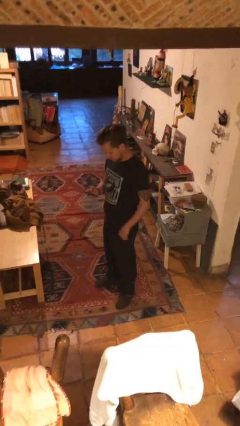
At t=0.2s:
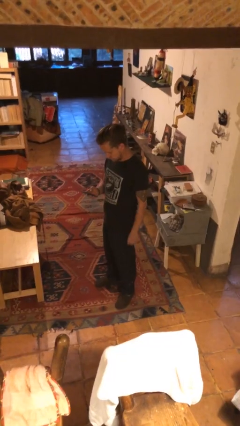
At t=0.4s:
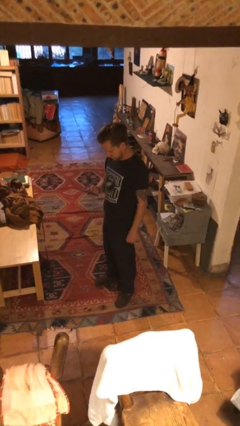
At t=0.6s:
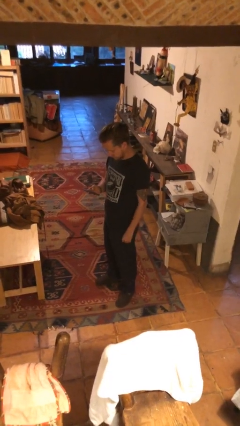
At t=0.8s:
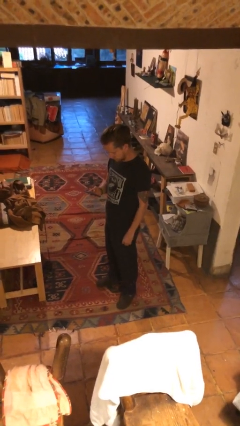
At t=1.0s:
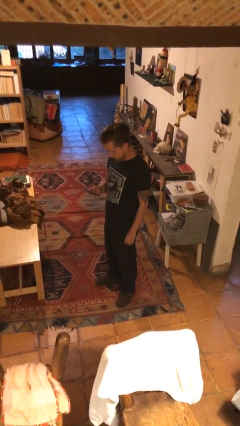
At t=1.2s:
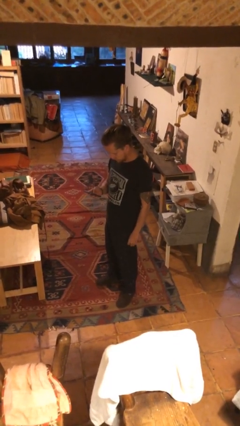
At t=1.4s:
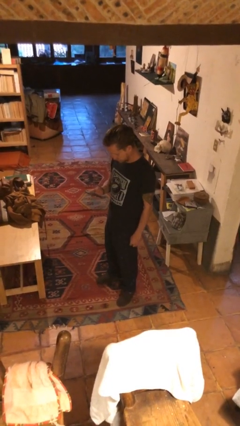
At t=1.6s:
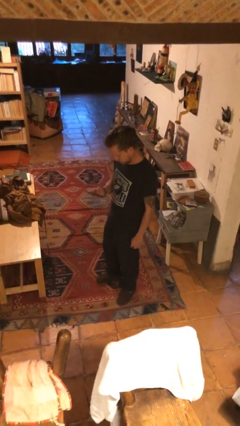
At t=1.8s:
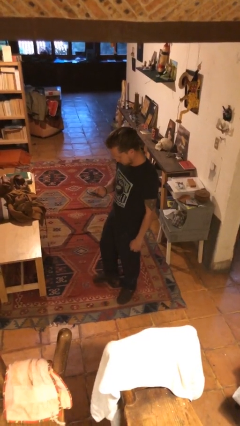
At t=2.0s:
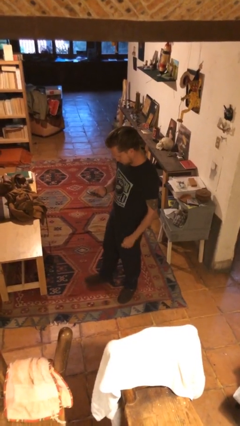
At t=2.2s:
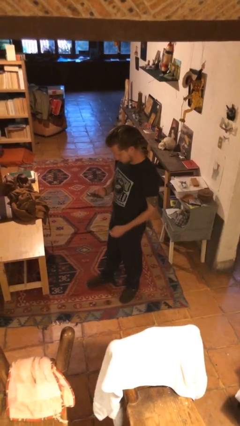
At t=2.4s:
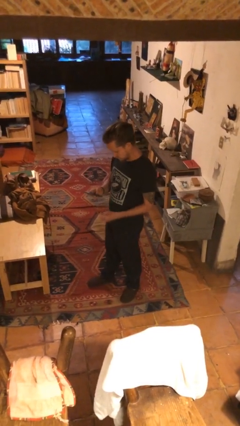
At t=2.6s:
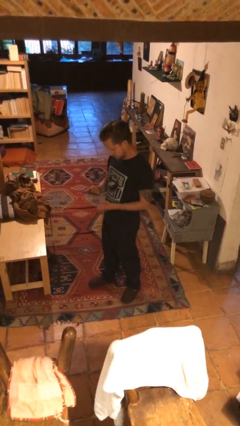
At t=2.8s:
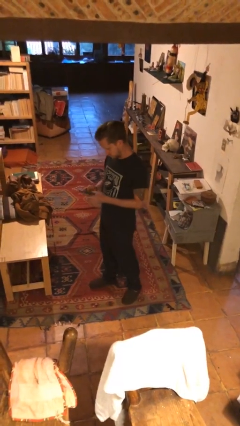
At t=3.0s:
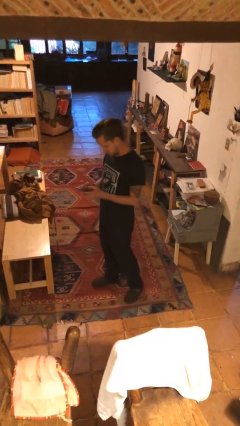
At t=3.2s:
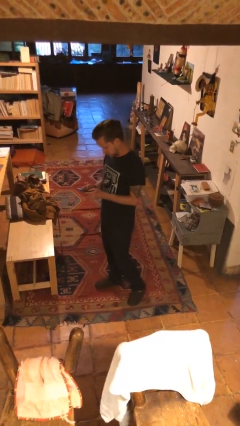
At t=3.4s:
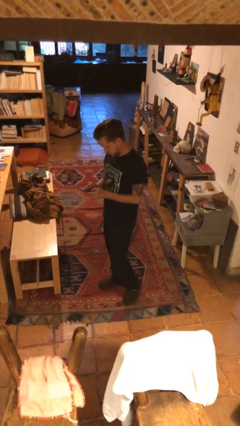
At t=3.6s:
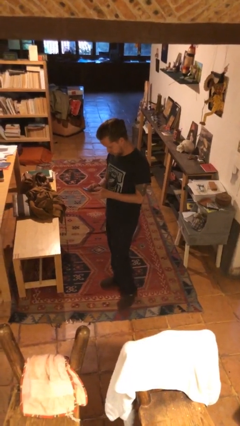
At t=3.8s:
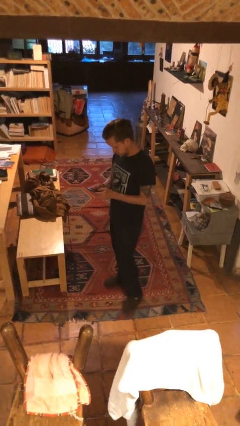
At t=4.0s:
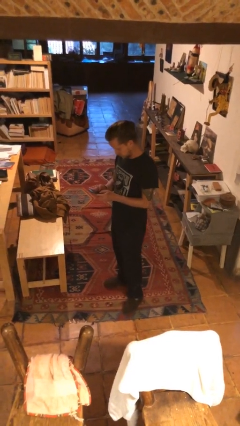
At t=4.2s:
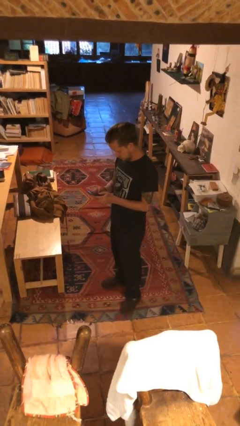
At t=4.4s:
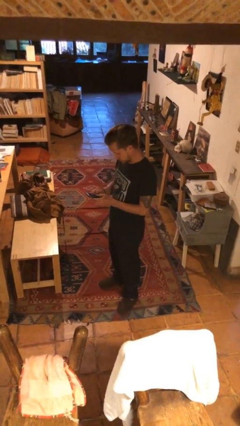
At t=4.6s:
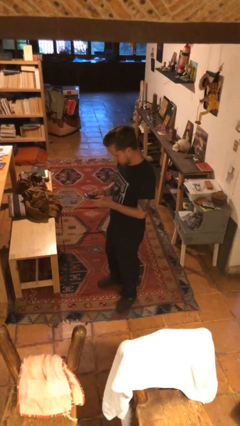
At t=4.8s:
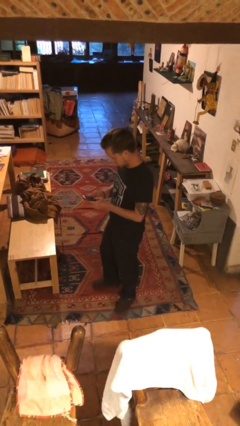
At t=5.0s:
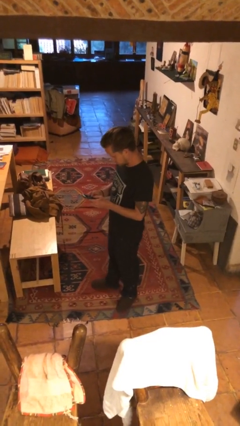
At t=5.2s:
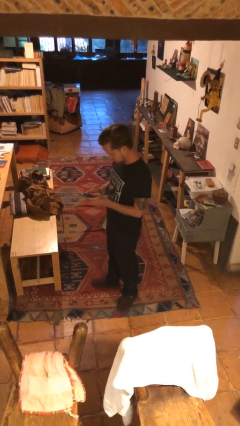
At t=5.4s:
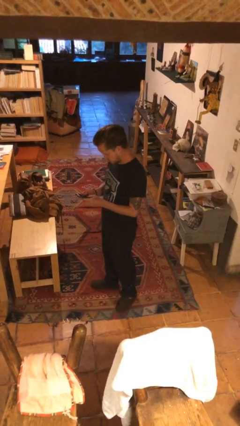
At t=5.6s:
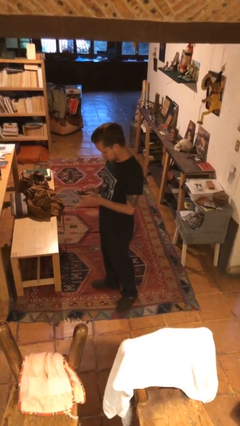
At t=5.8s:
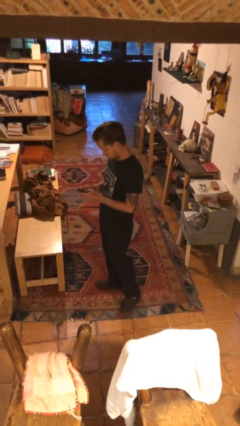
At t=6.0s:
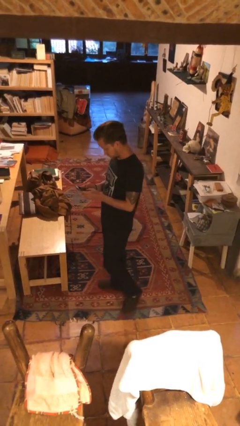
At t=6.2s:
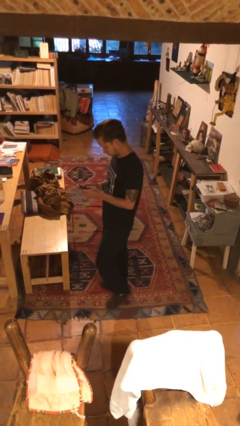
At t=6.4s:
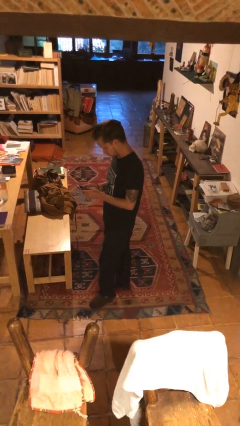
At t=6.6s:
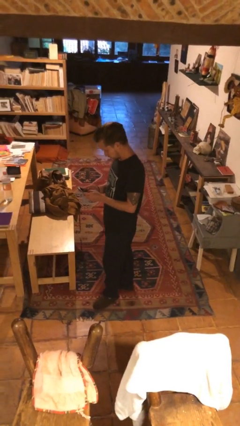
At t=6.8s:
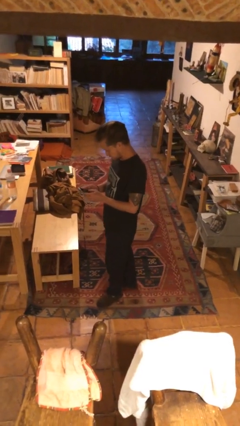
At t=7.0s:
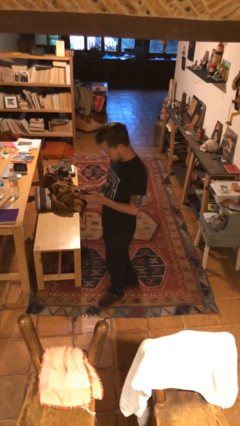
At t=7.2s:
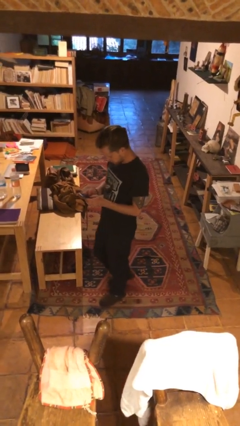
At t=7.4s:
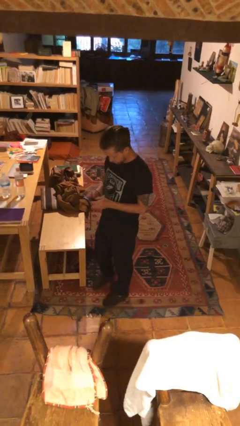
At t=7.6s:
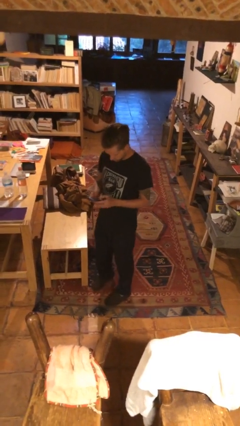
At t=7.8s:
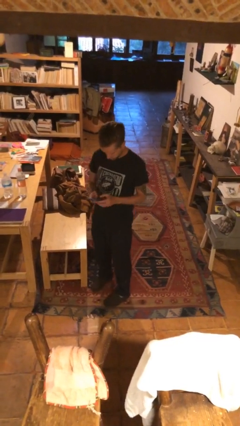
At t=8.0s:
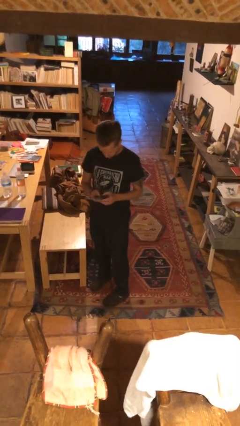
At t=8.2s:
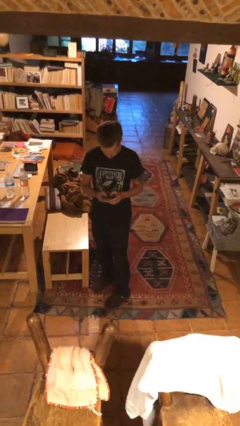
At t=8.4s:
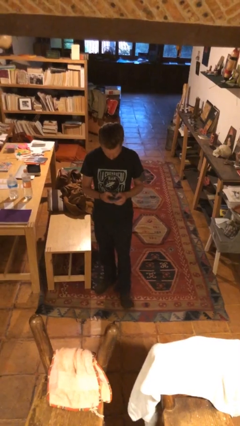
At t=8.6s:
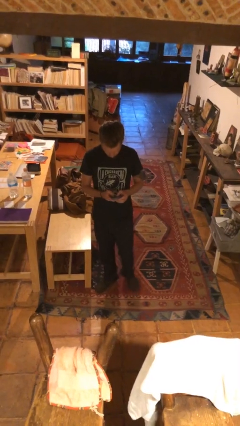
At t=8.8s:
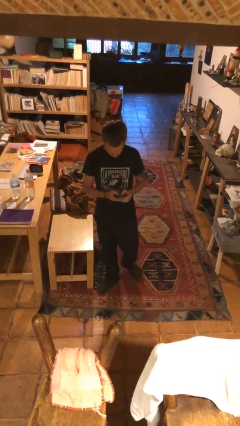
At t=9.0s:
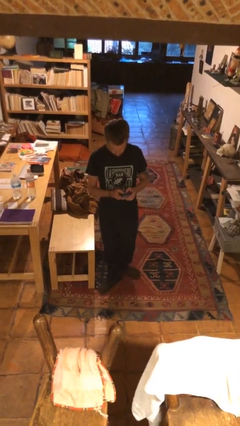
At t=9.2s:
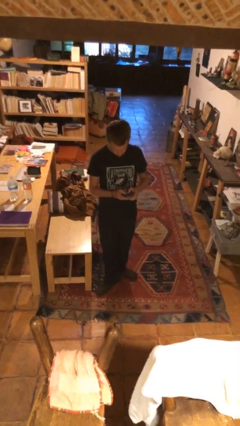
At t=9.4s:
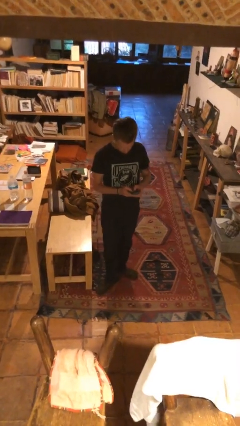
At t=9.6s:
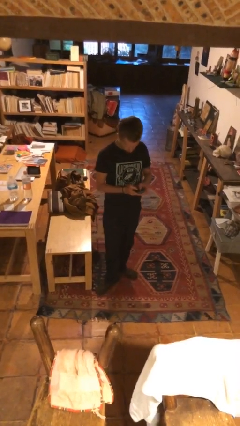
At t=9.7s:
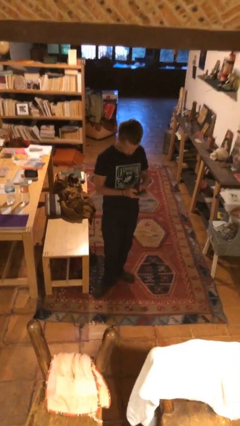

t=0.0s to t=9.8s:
person texts on phone

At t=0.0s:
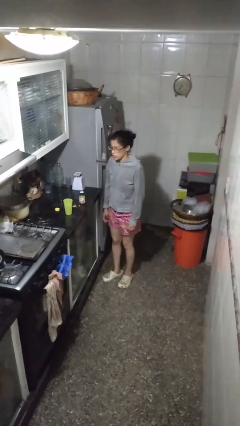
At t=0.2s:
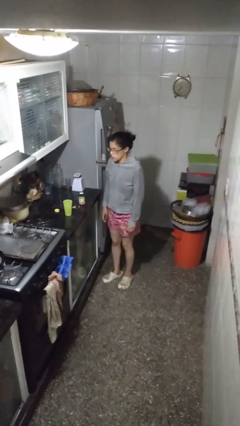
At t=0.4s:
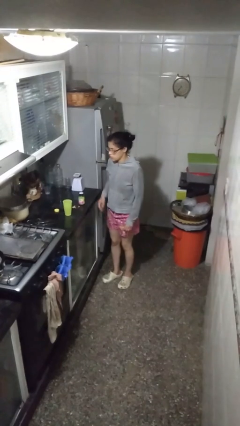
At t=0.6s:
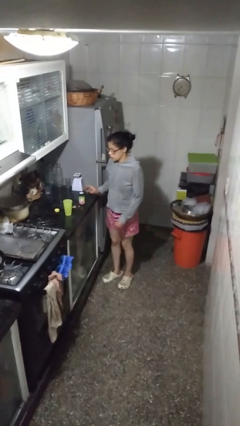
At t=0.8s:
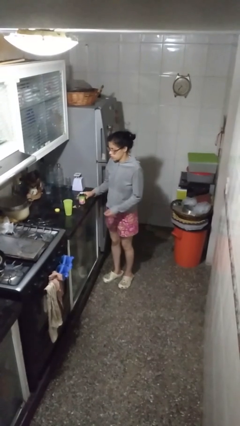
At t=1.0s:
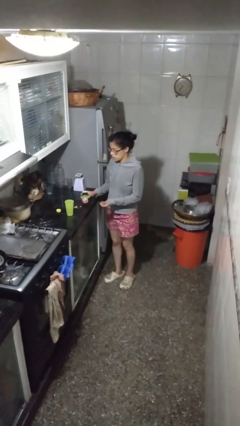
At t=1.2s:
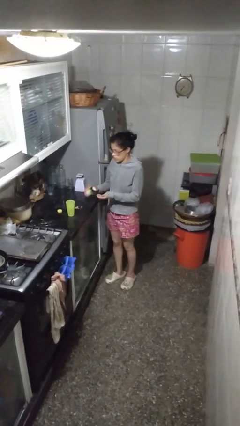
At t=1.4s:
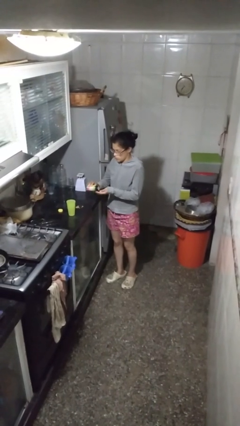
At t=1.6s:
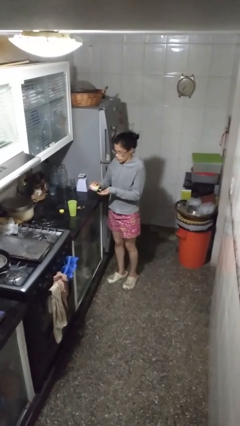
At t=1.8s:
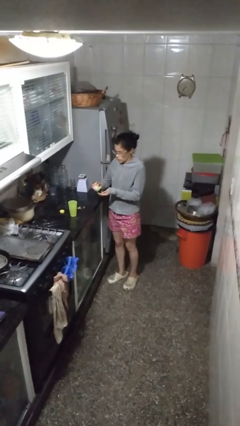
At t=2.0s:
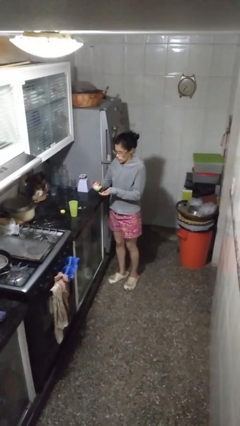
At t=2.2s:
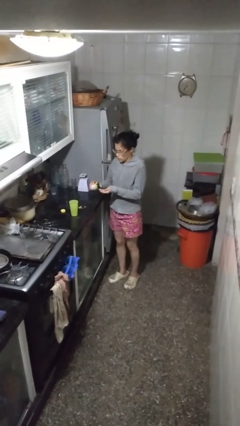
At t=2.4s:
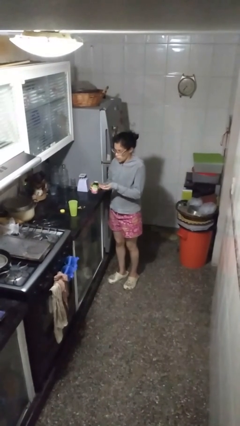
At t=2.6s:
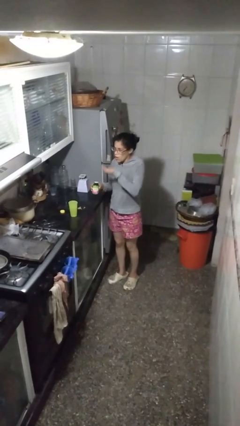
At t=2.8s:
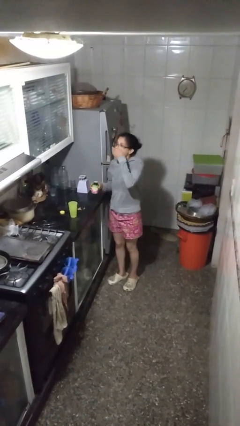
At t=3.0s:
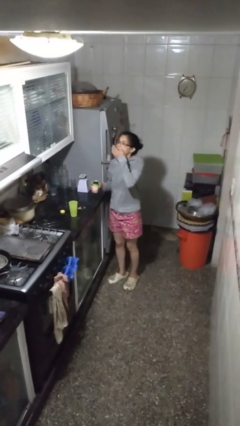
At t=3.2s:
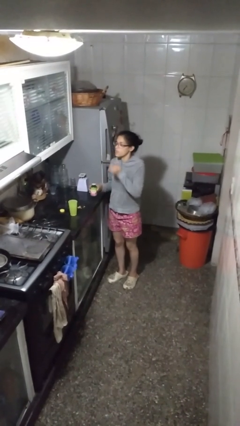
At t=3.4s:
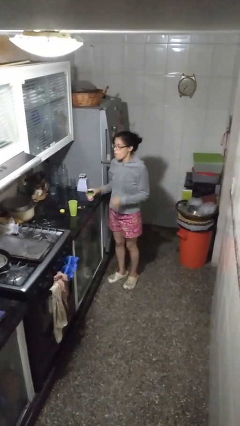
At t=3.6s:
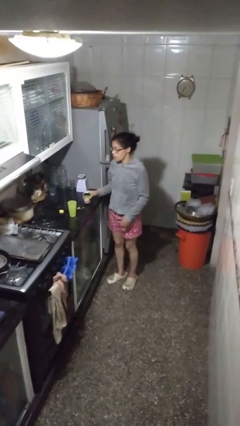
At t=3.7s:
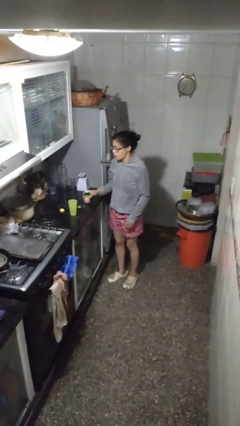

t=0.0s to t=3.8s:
person takes medicine pills

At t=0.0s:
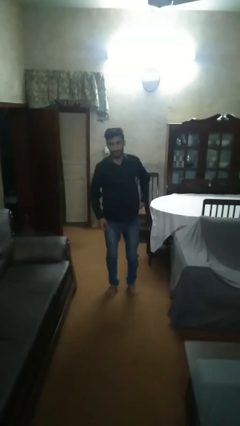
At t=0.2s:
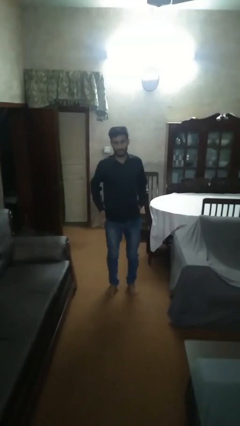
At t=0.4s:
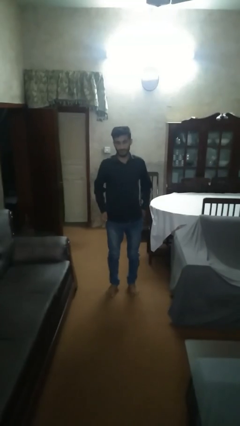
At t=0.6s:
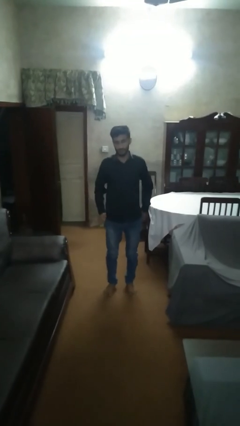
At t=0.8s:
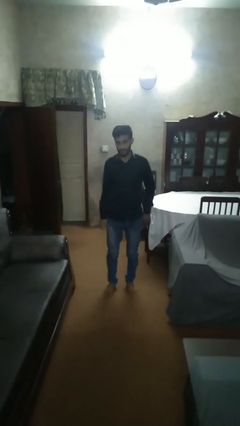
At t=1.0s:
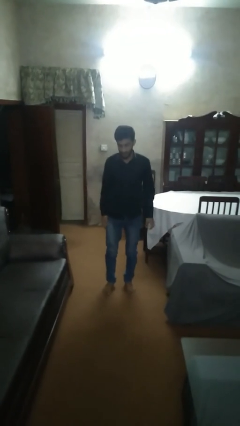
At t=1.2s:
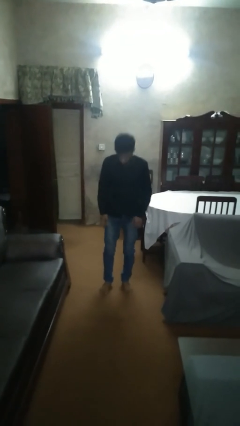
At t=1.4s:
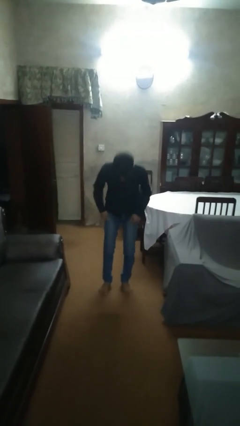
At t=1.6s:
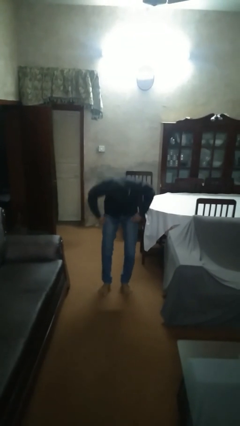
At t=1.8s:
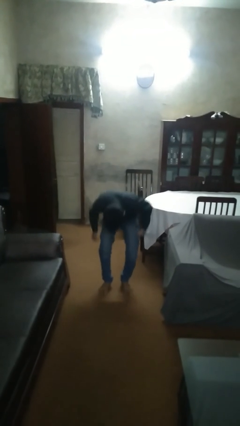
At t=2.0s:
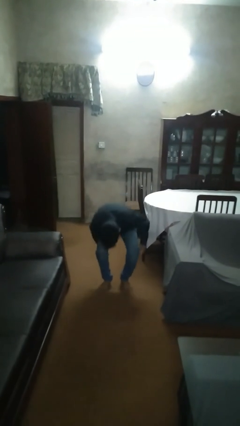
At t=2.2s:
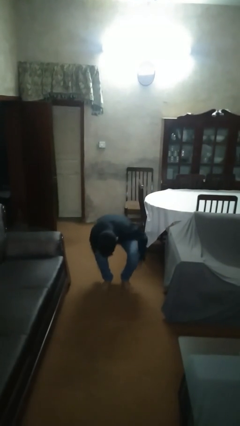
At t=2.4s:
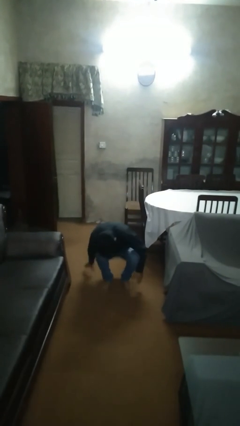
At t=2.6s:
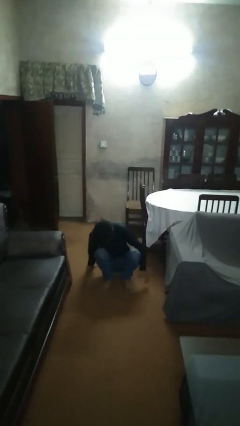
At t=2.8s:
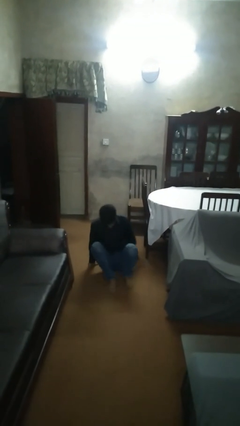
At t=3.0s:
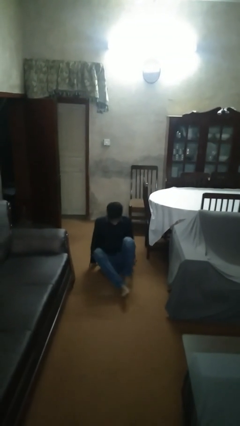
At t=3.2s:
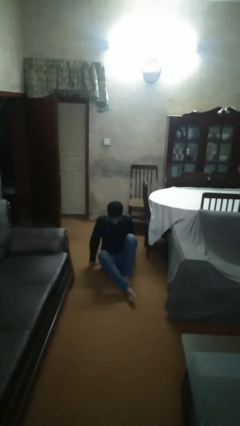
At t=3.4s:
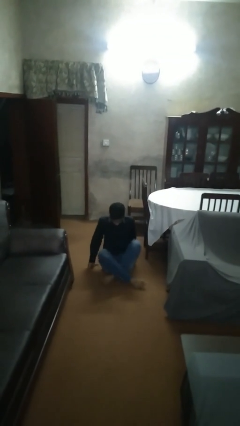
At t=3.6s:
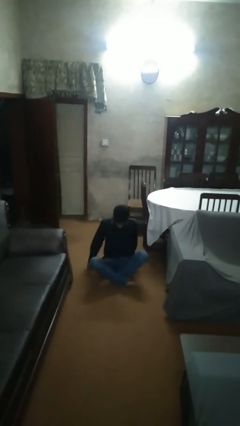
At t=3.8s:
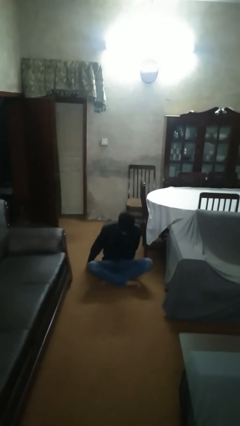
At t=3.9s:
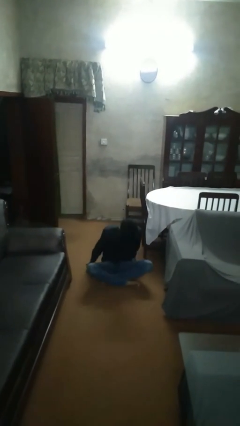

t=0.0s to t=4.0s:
person sits crisscross

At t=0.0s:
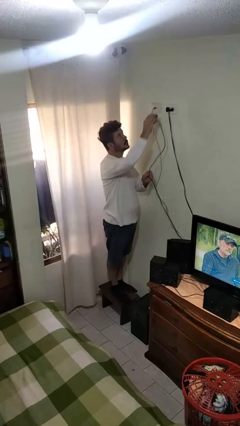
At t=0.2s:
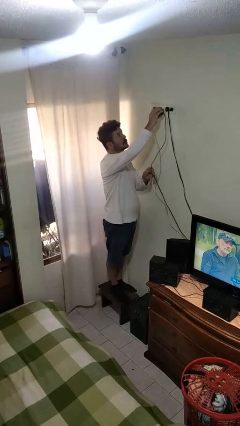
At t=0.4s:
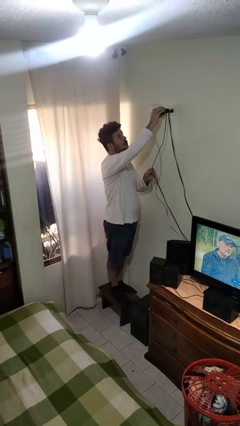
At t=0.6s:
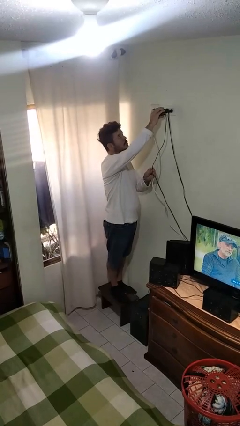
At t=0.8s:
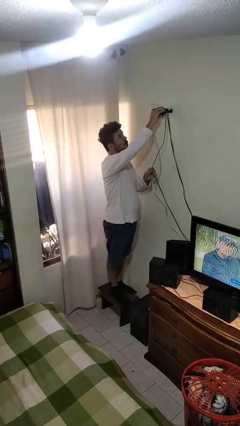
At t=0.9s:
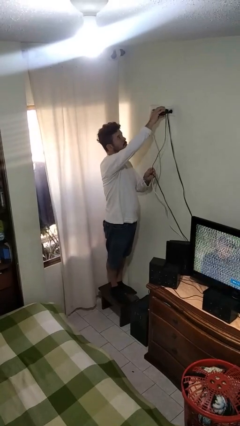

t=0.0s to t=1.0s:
person plugs into electrical socket
